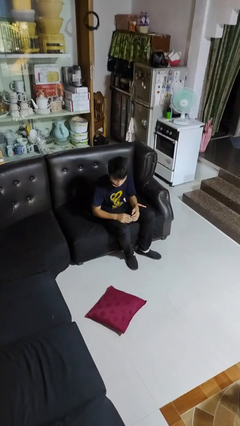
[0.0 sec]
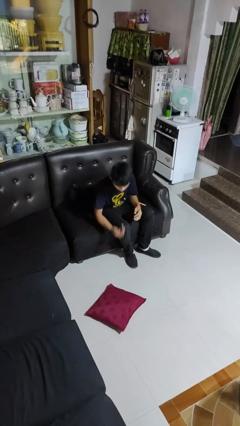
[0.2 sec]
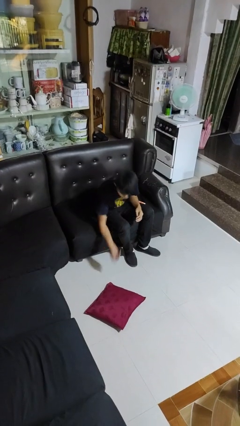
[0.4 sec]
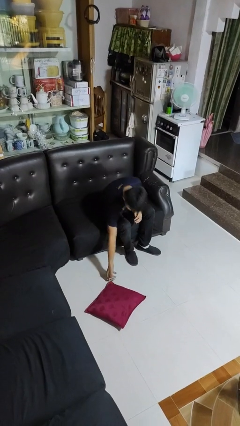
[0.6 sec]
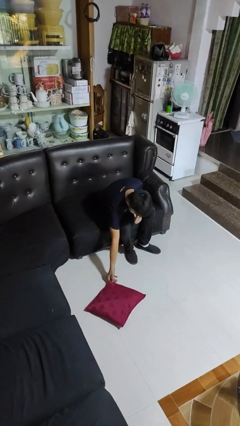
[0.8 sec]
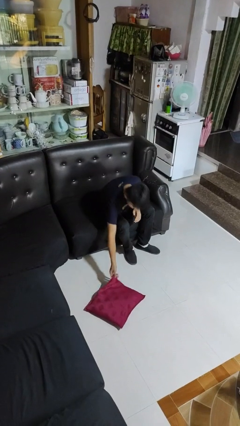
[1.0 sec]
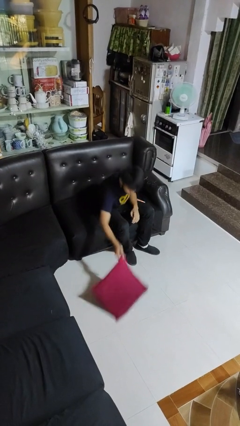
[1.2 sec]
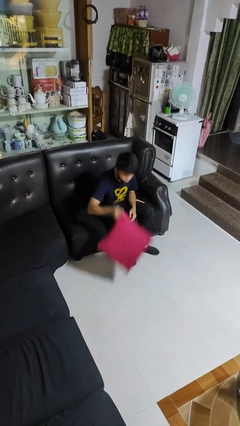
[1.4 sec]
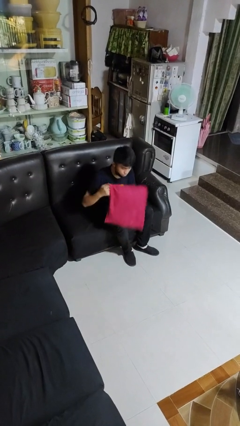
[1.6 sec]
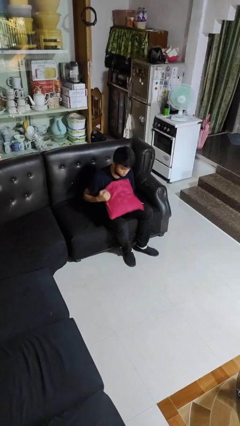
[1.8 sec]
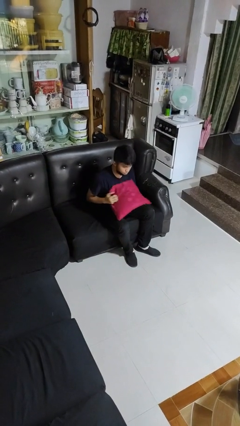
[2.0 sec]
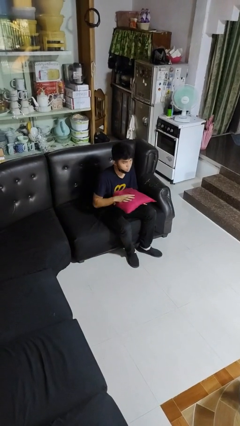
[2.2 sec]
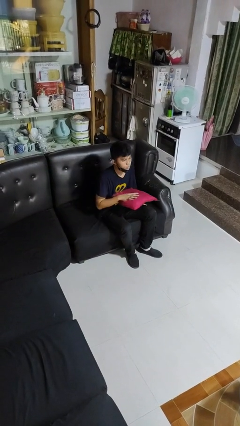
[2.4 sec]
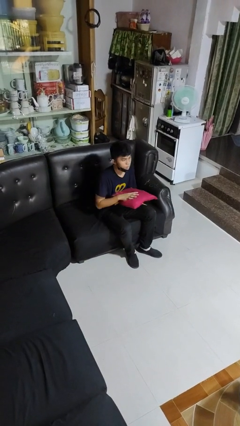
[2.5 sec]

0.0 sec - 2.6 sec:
person picks up object from floor

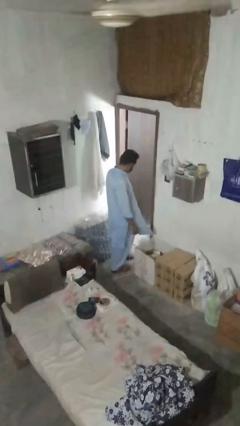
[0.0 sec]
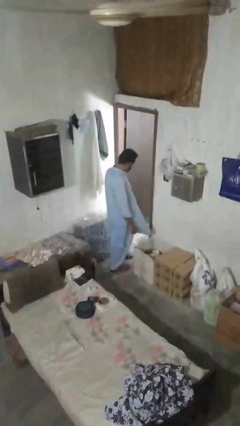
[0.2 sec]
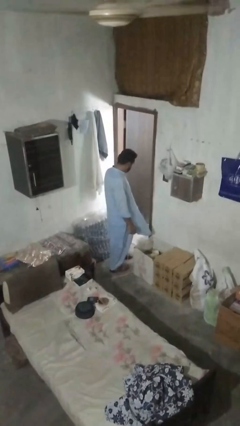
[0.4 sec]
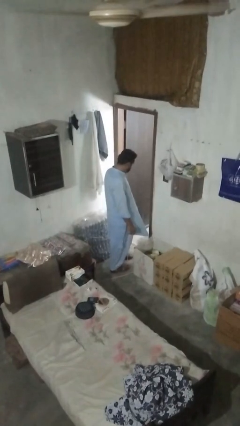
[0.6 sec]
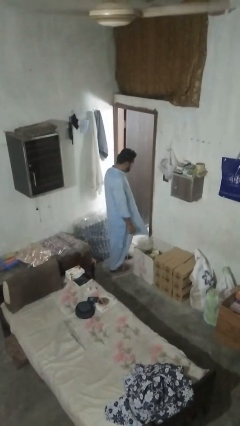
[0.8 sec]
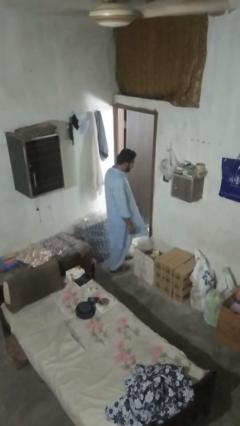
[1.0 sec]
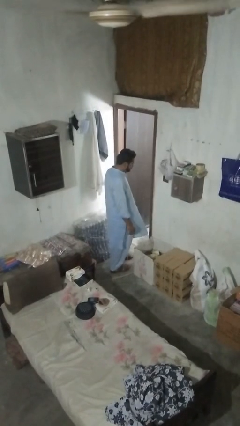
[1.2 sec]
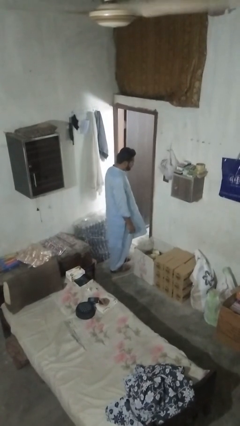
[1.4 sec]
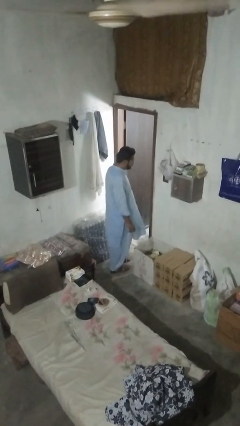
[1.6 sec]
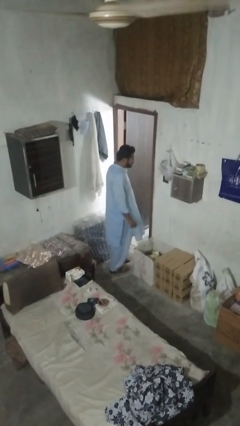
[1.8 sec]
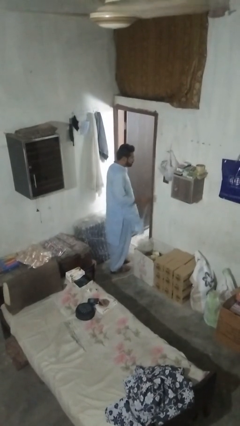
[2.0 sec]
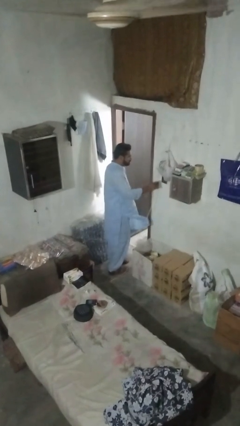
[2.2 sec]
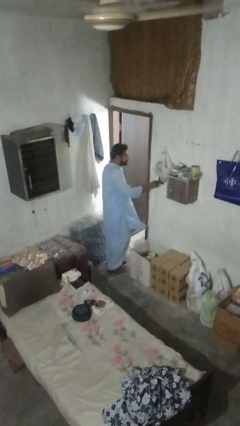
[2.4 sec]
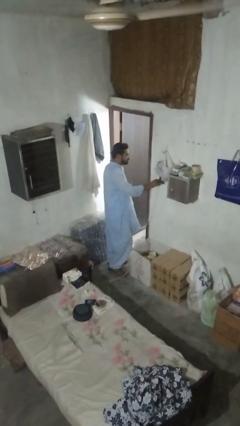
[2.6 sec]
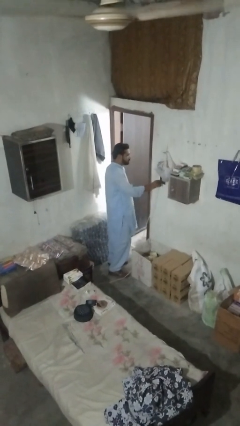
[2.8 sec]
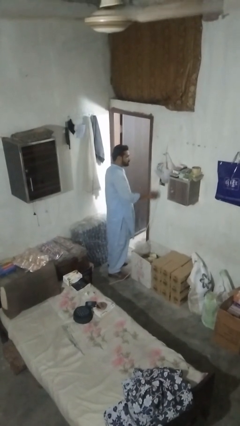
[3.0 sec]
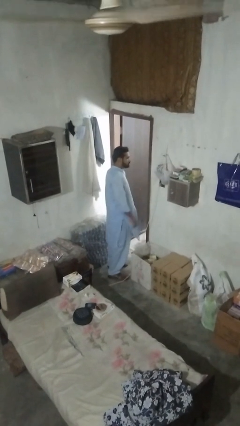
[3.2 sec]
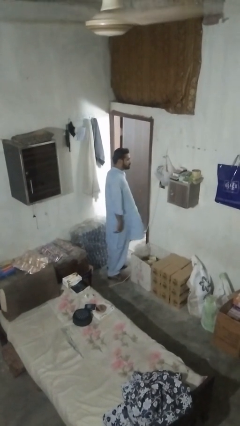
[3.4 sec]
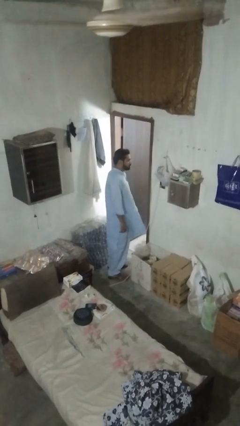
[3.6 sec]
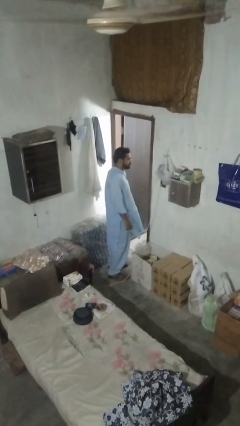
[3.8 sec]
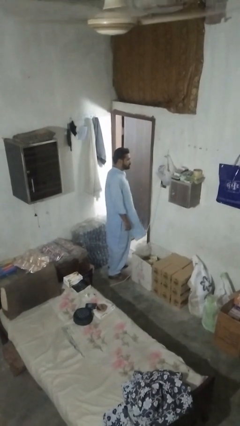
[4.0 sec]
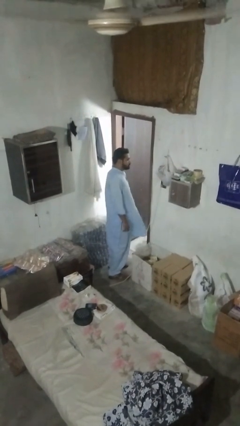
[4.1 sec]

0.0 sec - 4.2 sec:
person plugs into electrical socket

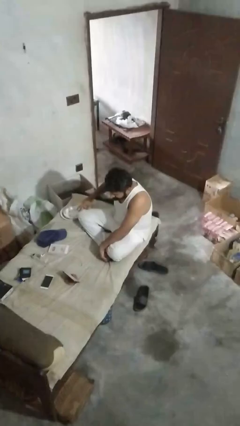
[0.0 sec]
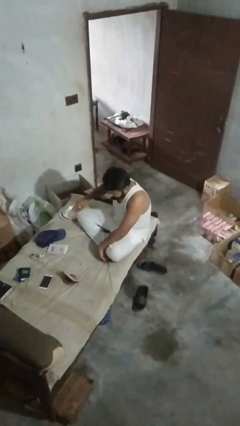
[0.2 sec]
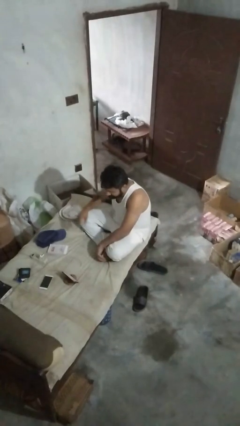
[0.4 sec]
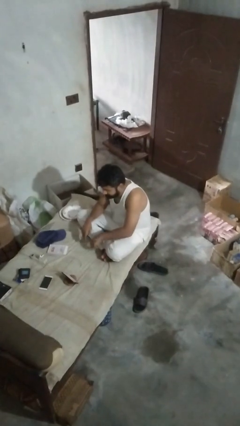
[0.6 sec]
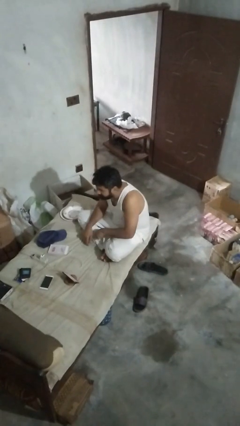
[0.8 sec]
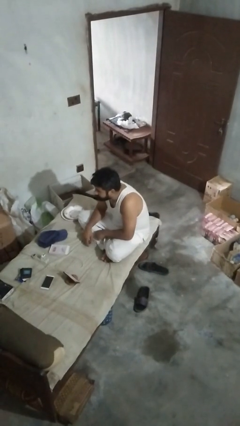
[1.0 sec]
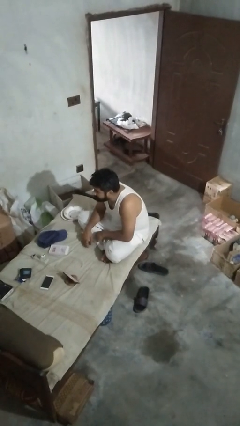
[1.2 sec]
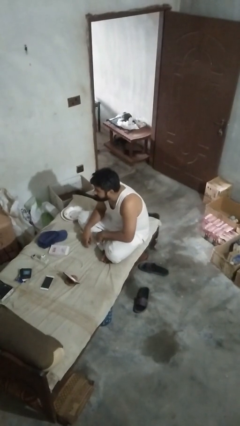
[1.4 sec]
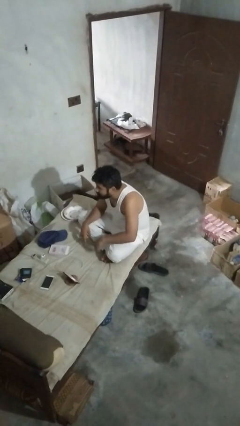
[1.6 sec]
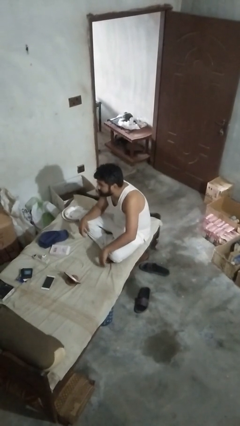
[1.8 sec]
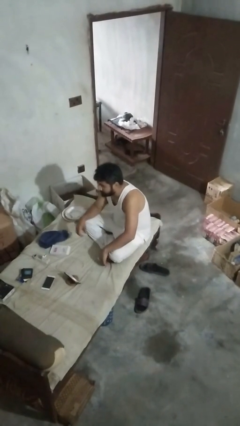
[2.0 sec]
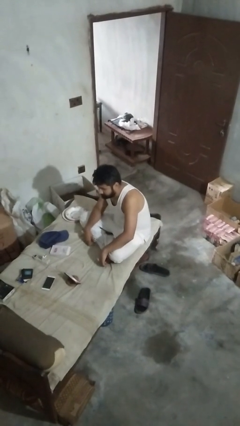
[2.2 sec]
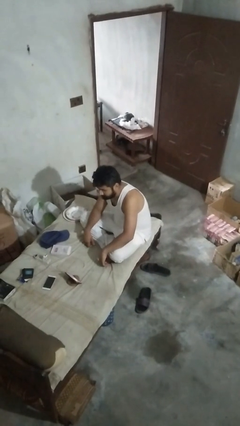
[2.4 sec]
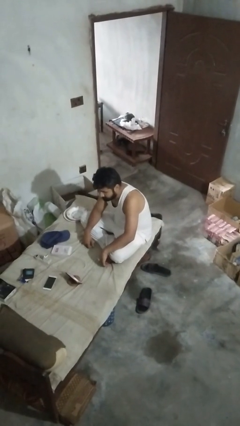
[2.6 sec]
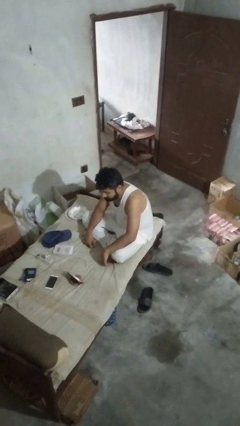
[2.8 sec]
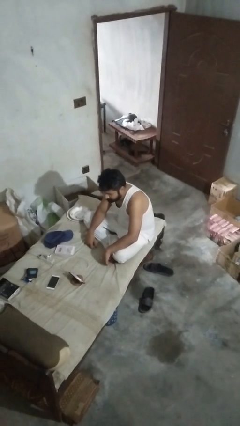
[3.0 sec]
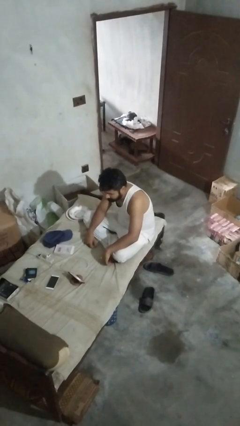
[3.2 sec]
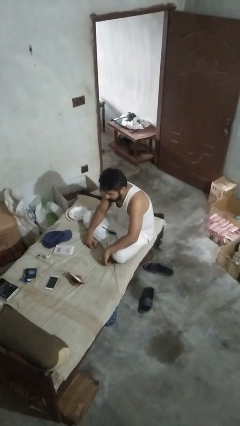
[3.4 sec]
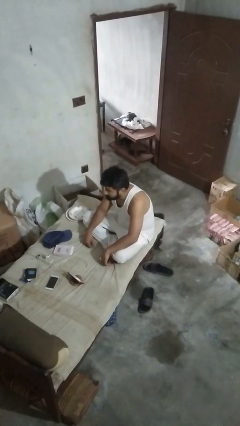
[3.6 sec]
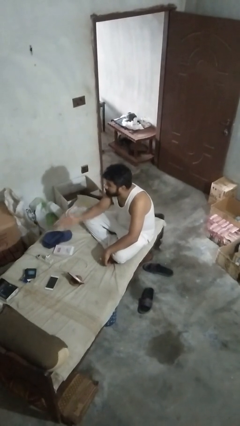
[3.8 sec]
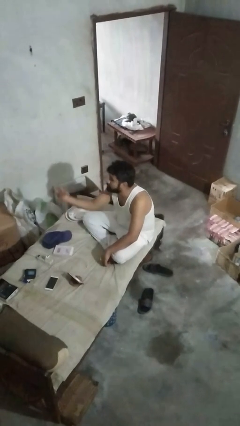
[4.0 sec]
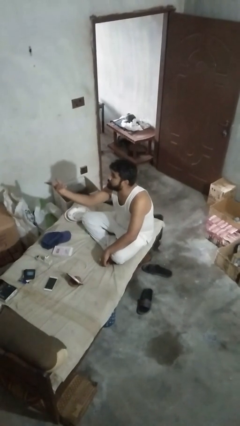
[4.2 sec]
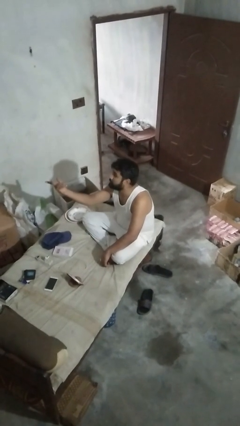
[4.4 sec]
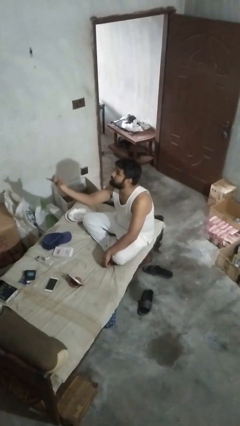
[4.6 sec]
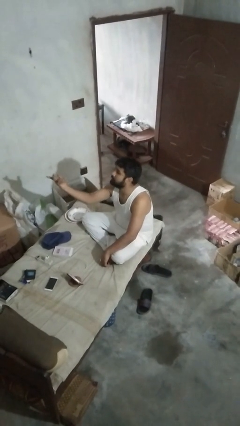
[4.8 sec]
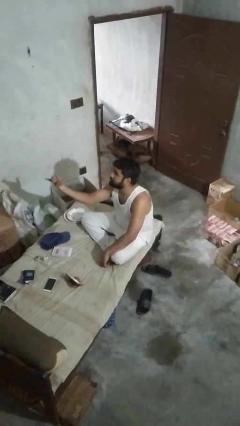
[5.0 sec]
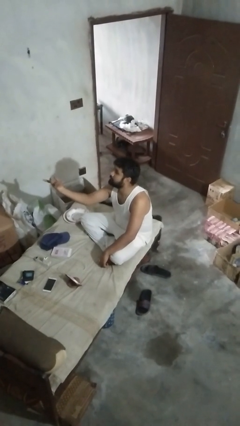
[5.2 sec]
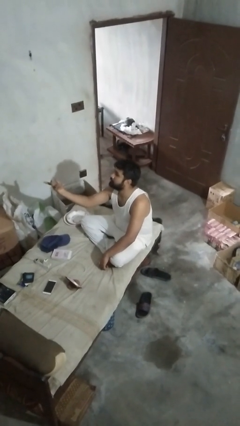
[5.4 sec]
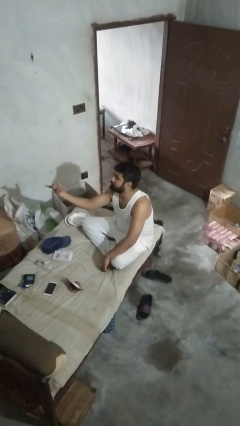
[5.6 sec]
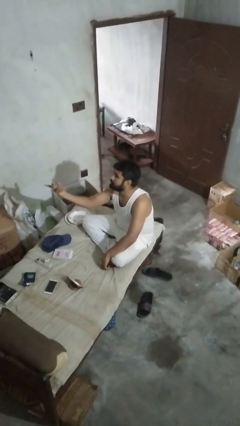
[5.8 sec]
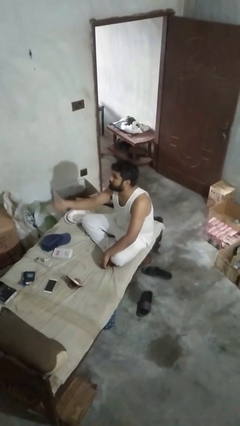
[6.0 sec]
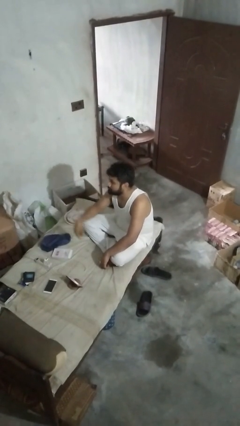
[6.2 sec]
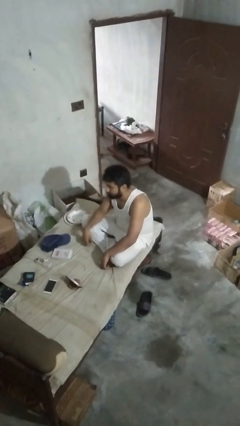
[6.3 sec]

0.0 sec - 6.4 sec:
person gestures raise hand

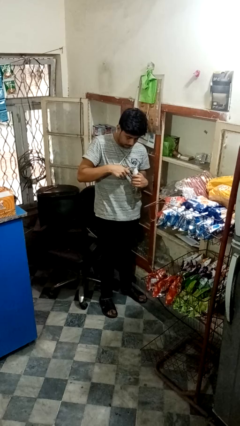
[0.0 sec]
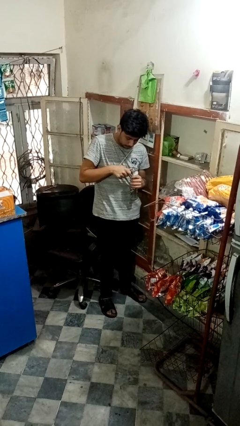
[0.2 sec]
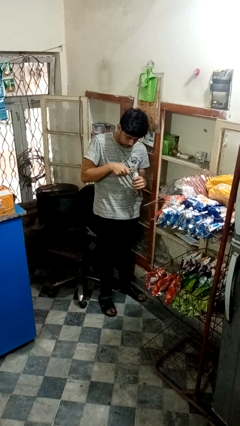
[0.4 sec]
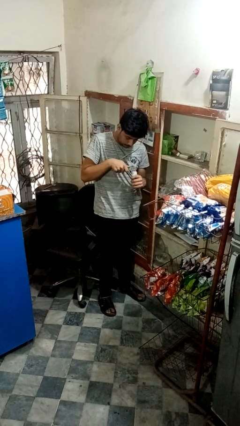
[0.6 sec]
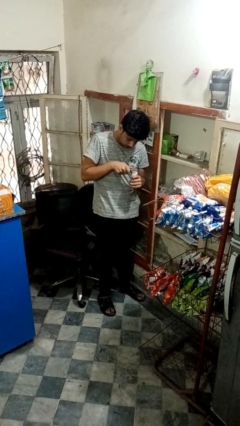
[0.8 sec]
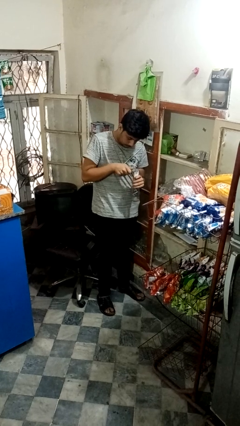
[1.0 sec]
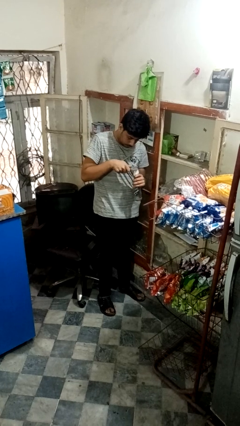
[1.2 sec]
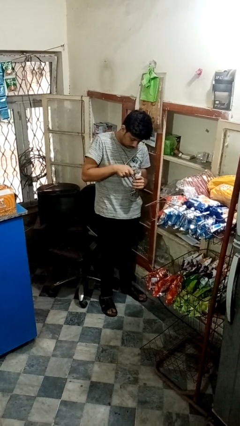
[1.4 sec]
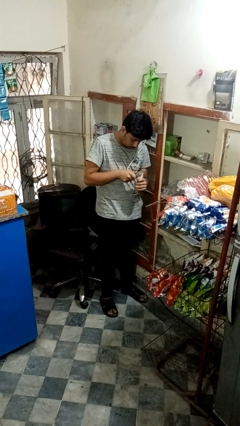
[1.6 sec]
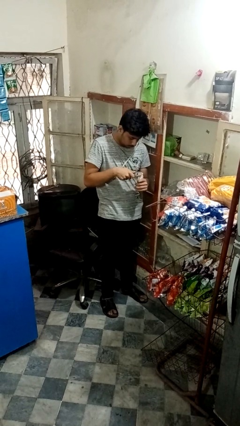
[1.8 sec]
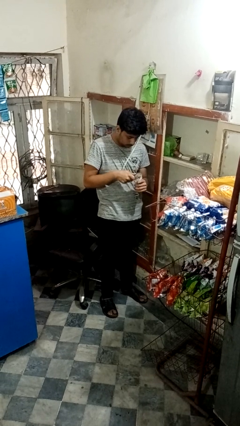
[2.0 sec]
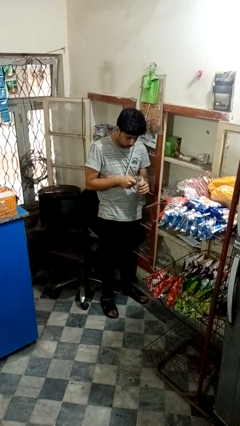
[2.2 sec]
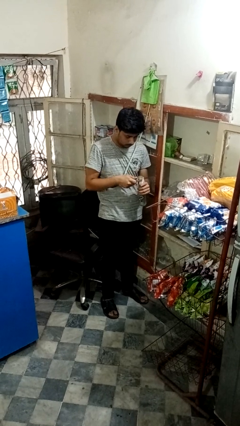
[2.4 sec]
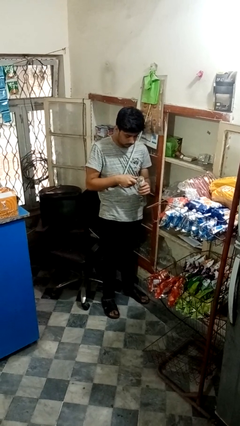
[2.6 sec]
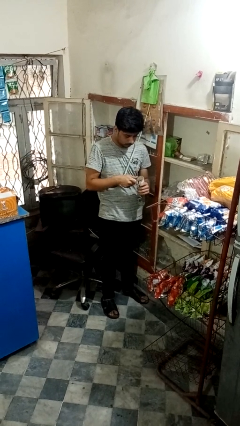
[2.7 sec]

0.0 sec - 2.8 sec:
person opens can with can opener

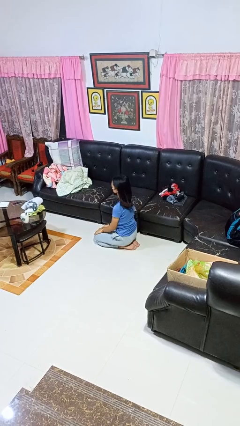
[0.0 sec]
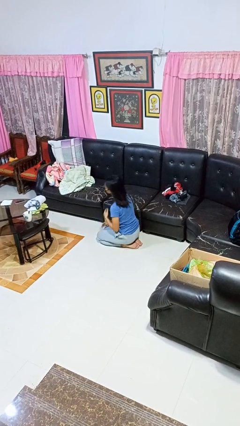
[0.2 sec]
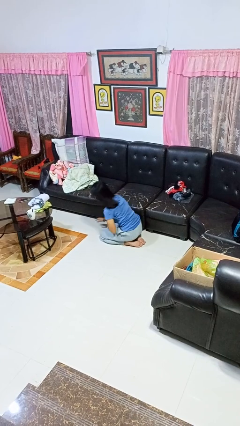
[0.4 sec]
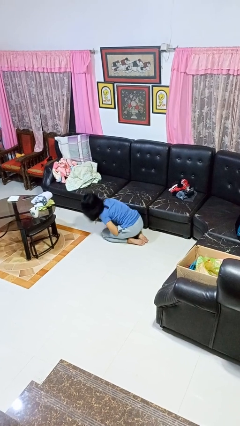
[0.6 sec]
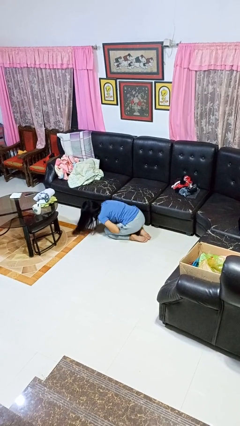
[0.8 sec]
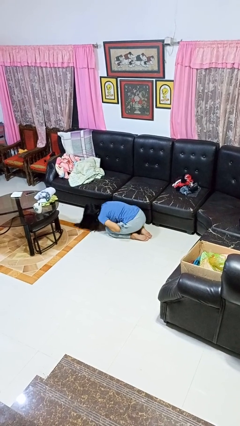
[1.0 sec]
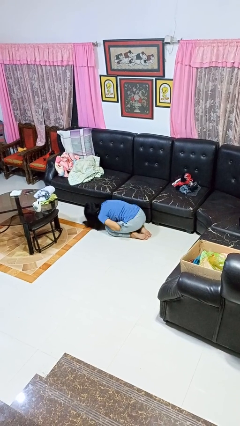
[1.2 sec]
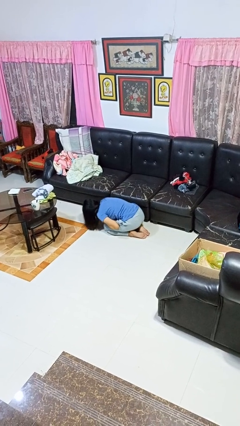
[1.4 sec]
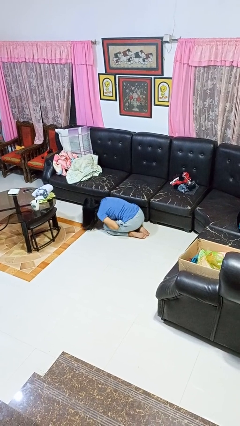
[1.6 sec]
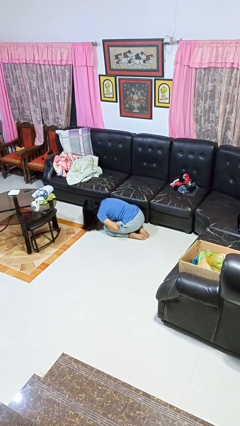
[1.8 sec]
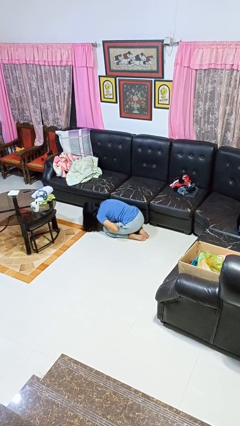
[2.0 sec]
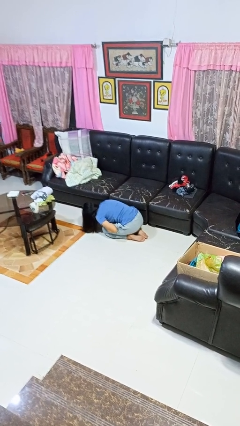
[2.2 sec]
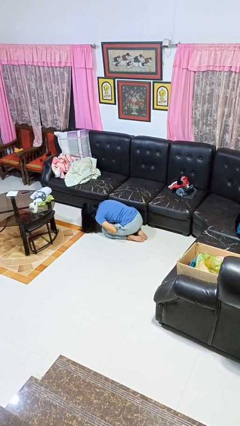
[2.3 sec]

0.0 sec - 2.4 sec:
person searches under couch
